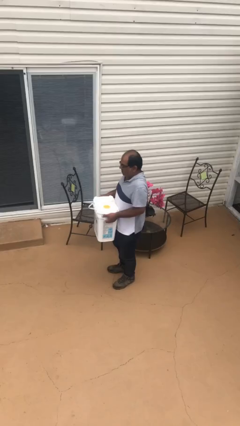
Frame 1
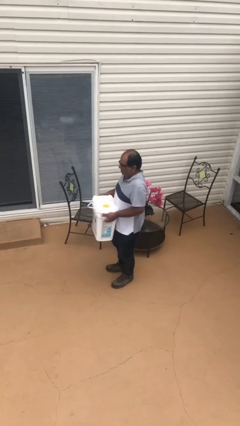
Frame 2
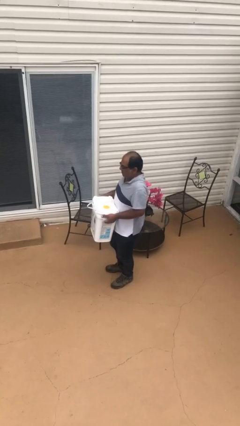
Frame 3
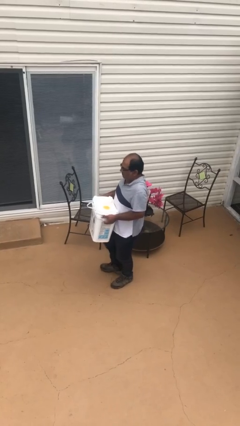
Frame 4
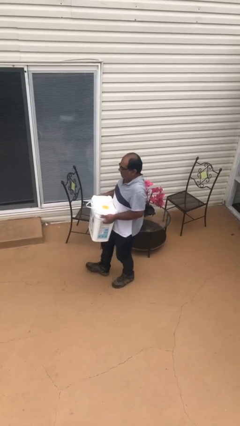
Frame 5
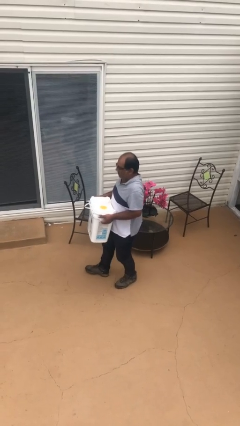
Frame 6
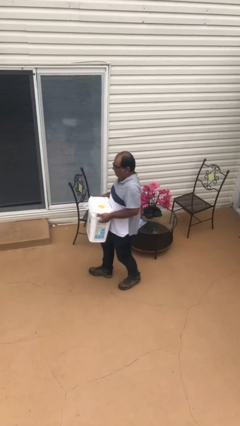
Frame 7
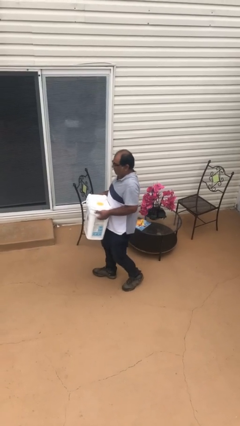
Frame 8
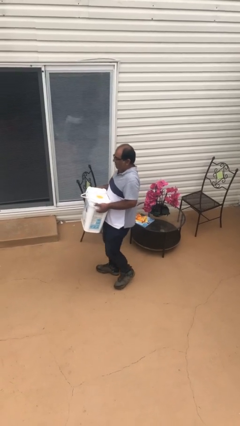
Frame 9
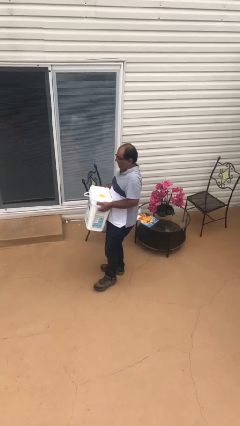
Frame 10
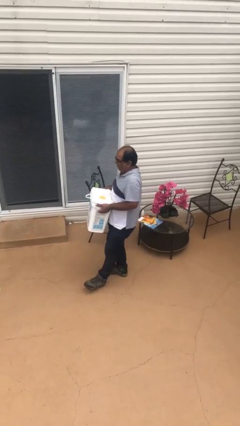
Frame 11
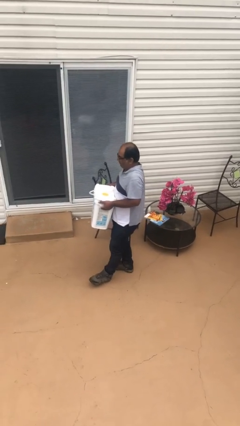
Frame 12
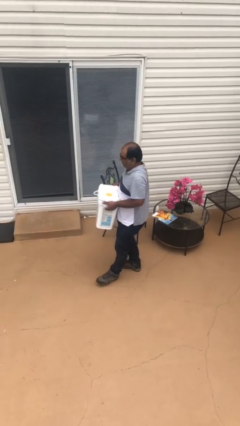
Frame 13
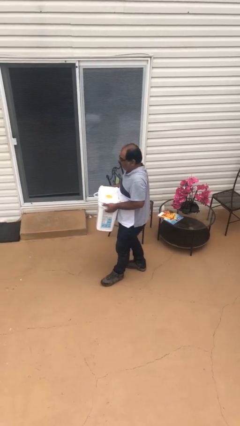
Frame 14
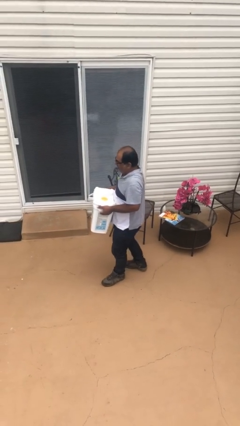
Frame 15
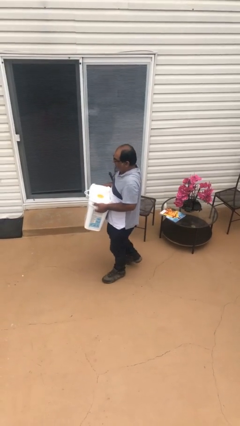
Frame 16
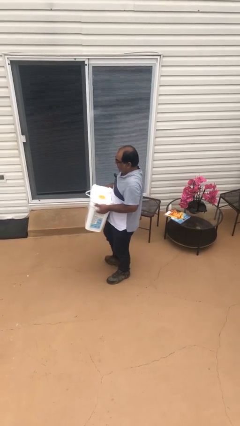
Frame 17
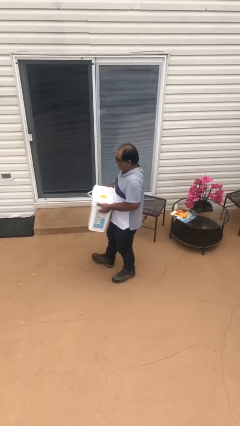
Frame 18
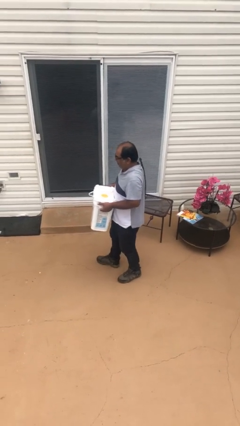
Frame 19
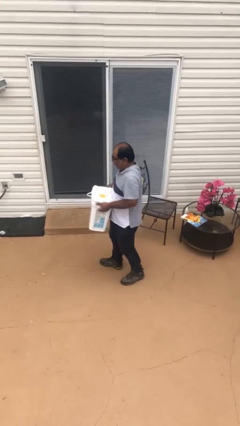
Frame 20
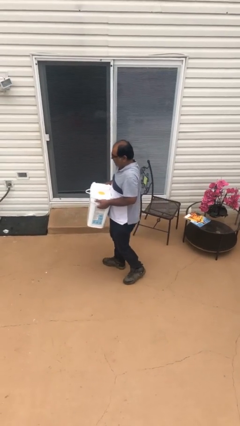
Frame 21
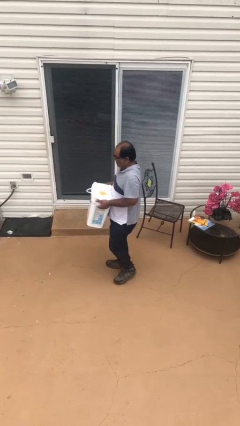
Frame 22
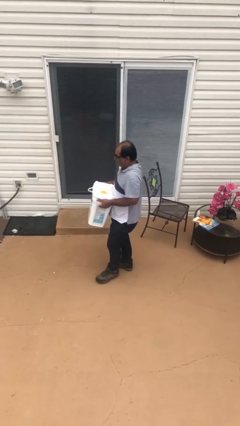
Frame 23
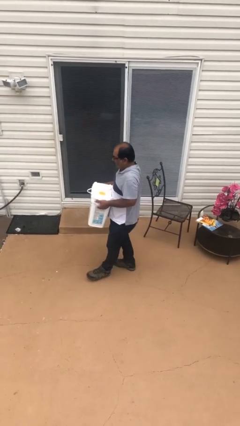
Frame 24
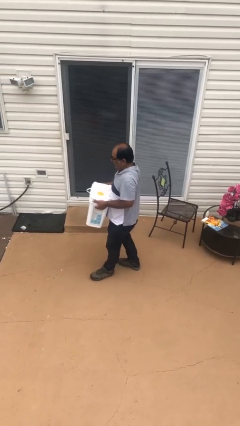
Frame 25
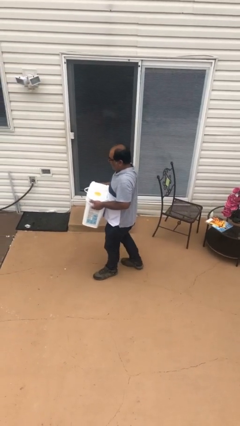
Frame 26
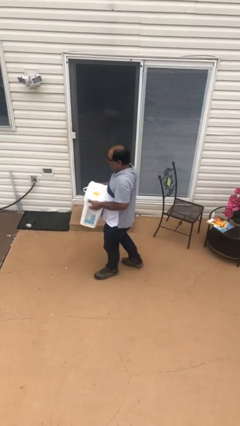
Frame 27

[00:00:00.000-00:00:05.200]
person carries heavy object

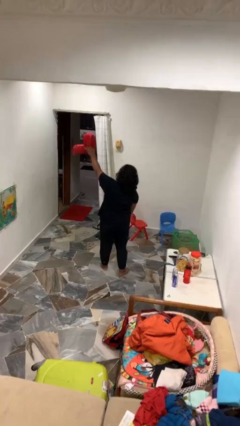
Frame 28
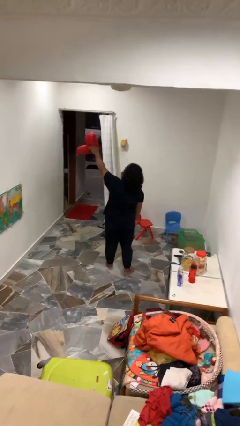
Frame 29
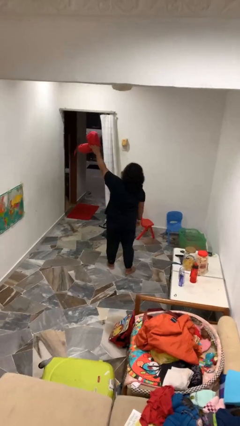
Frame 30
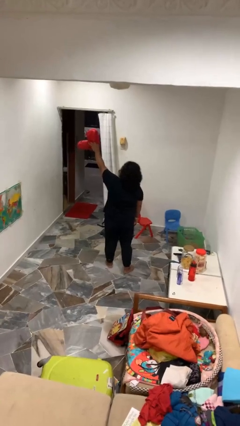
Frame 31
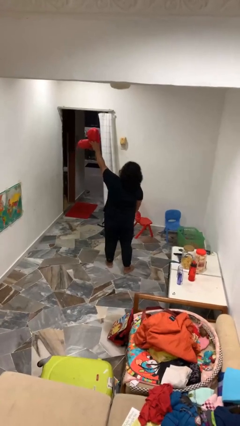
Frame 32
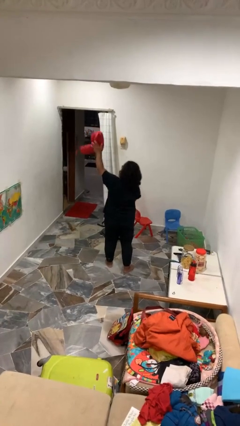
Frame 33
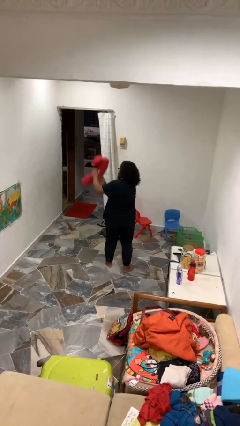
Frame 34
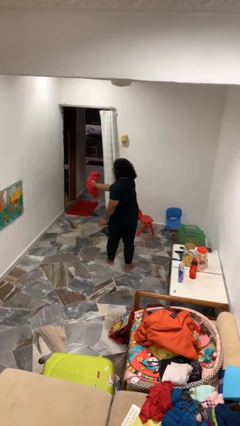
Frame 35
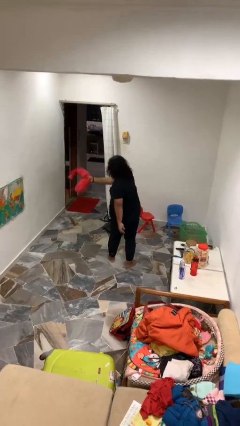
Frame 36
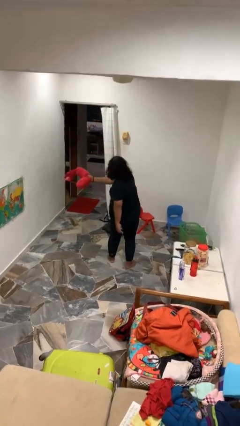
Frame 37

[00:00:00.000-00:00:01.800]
person drops object

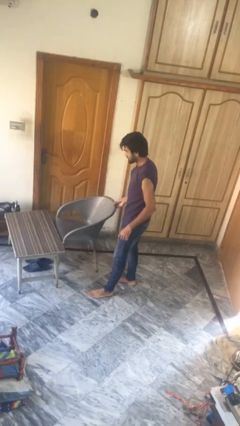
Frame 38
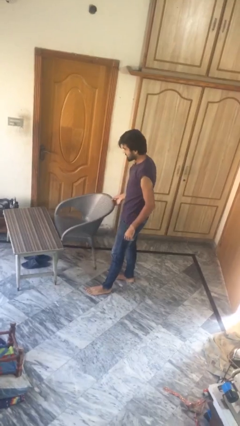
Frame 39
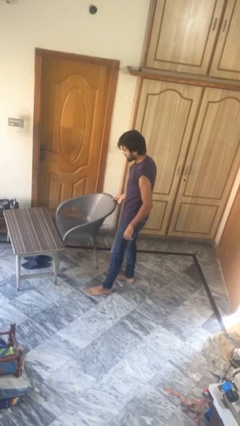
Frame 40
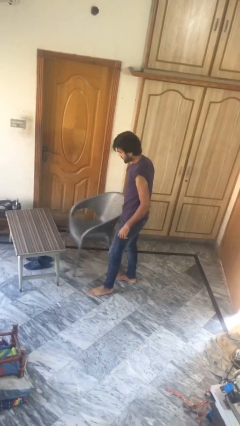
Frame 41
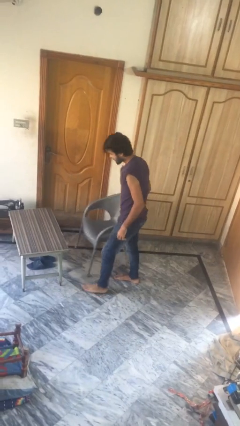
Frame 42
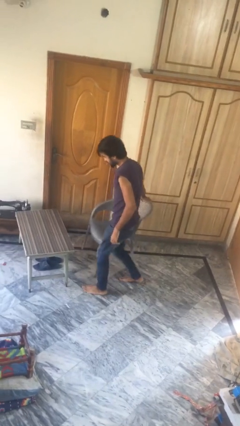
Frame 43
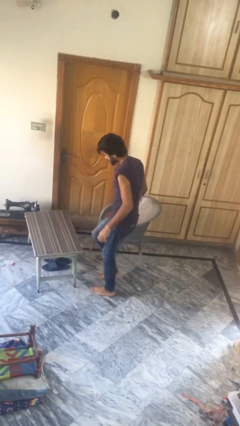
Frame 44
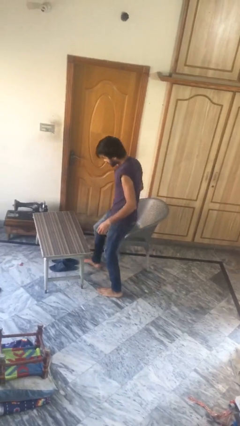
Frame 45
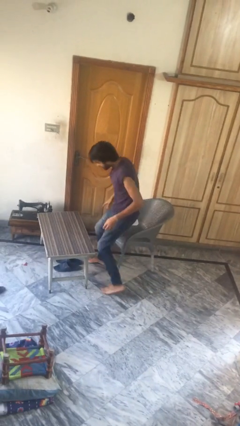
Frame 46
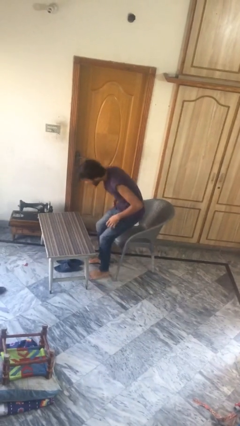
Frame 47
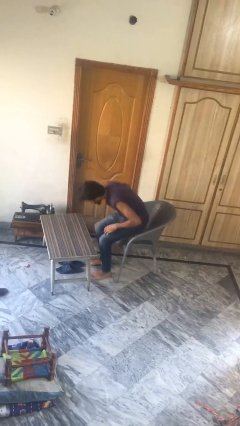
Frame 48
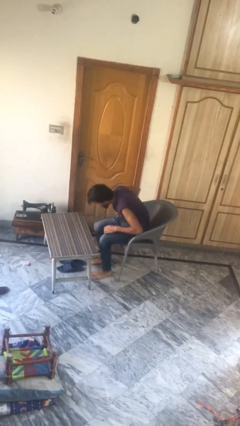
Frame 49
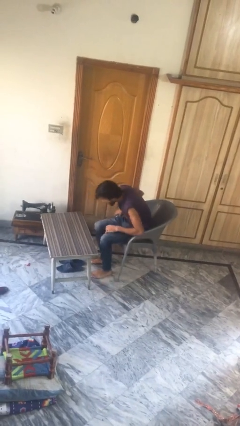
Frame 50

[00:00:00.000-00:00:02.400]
person sits down

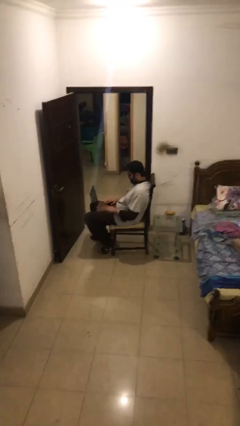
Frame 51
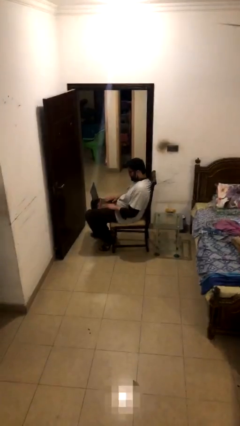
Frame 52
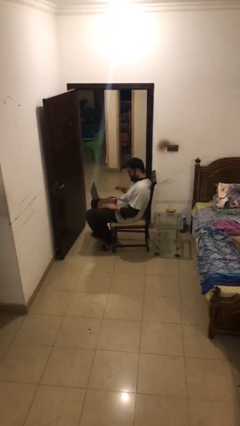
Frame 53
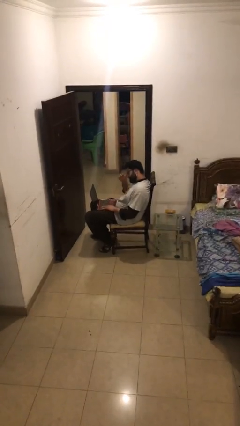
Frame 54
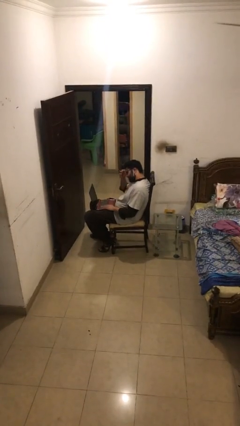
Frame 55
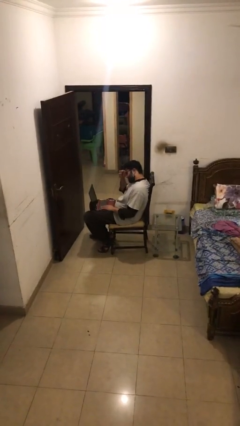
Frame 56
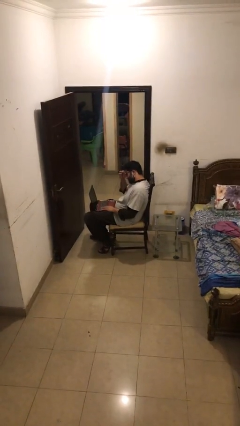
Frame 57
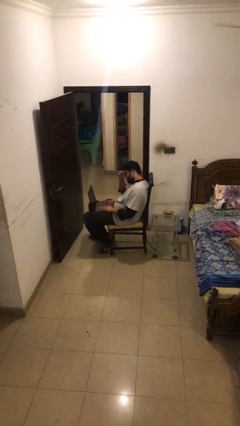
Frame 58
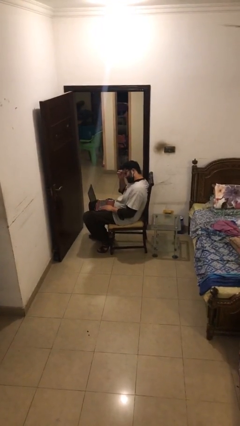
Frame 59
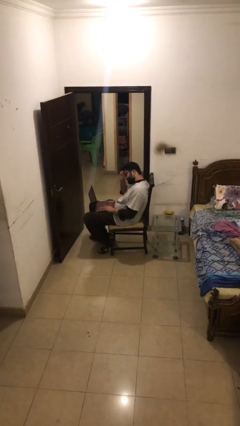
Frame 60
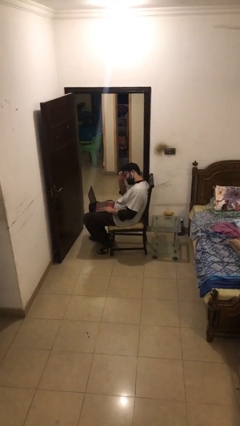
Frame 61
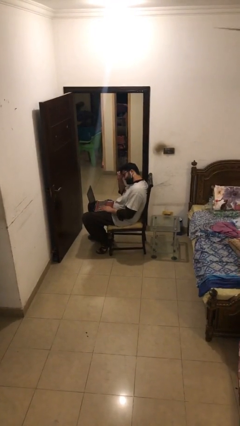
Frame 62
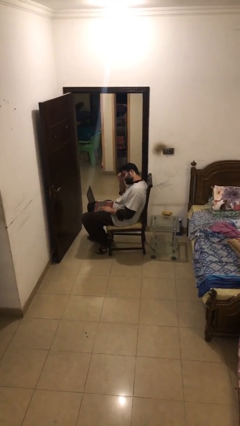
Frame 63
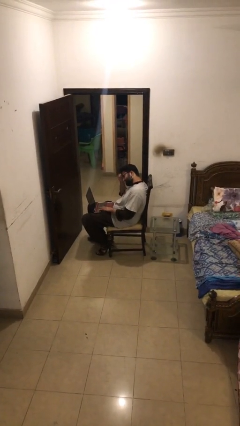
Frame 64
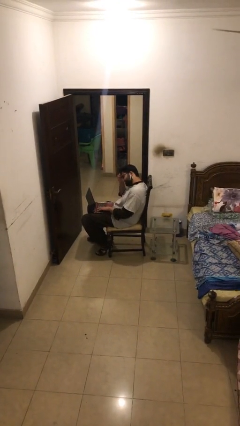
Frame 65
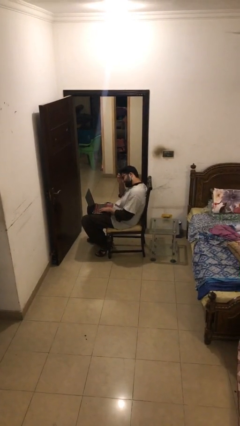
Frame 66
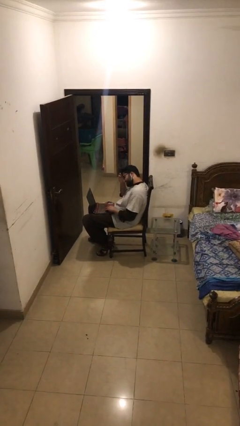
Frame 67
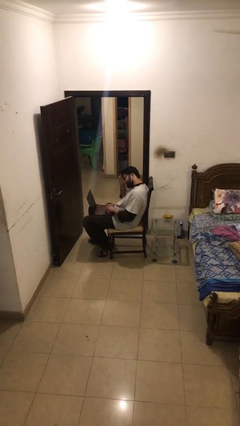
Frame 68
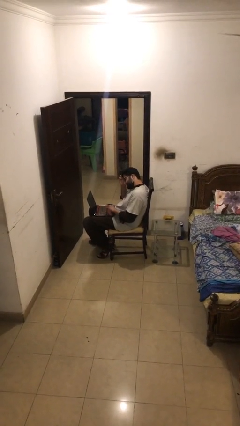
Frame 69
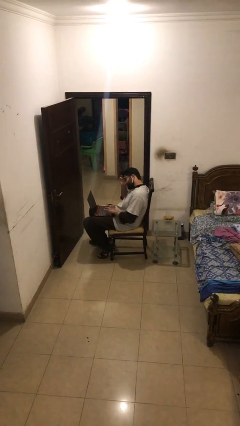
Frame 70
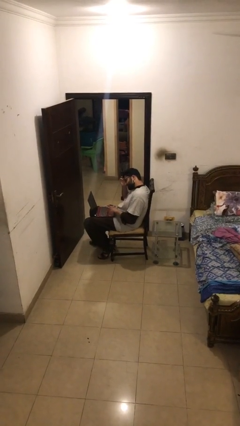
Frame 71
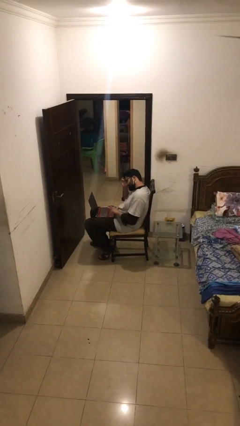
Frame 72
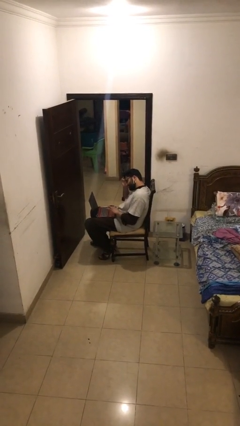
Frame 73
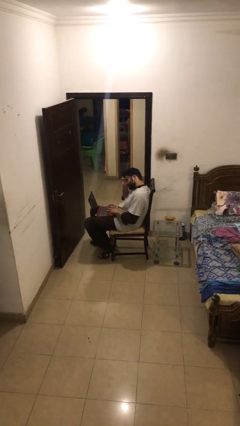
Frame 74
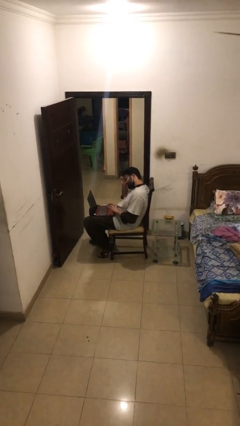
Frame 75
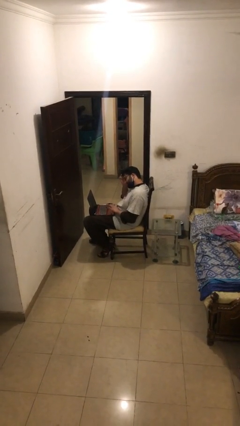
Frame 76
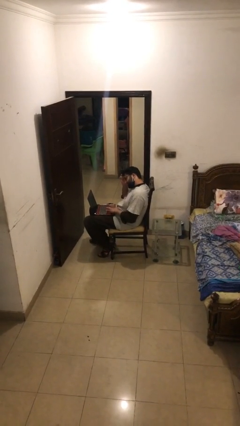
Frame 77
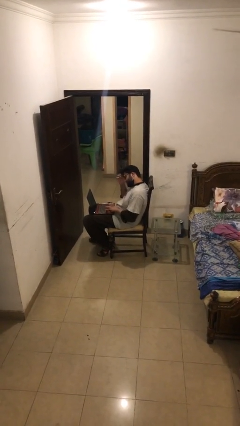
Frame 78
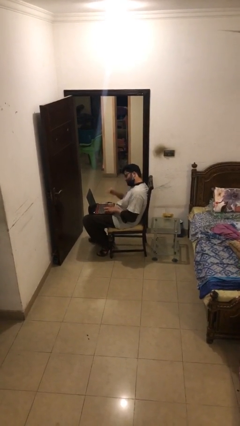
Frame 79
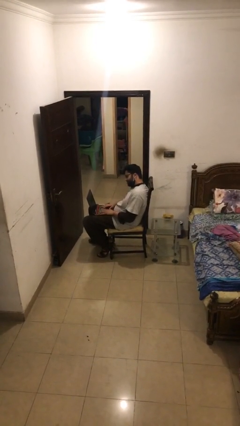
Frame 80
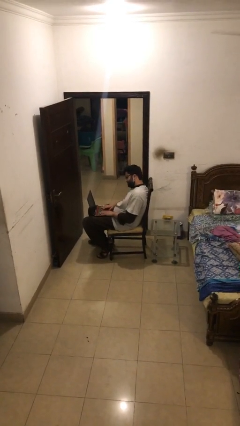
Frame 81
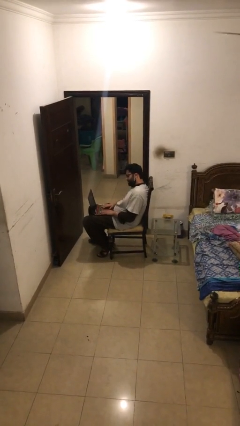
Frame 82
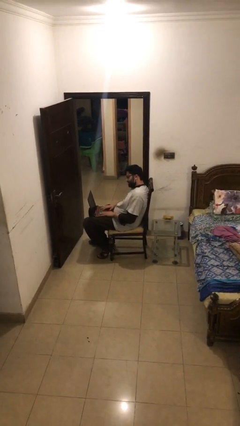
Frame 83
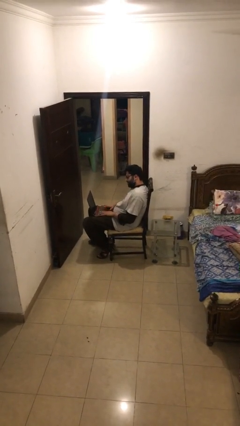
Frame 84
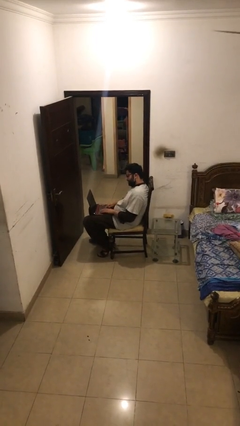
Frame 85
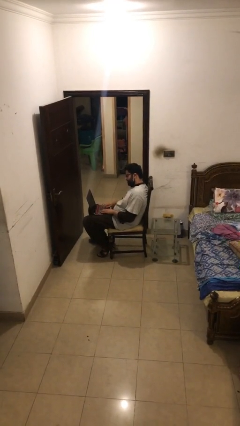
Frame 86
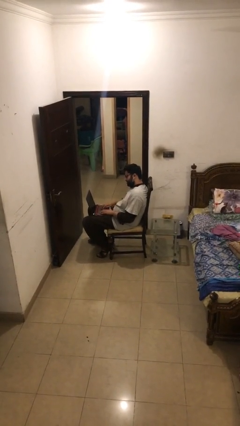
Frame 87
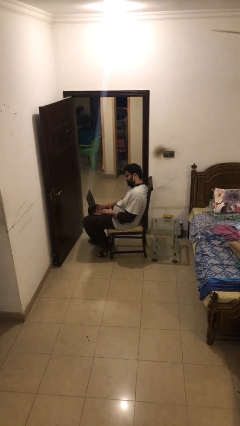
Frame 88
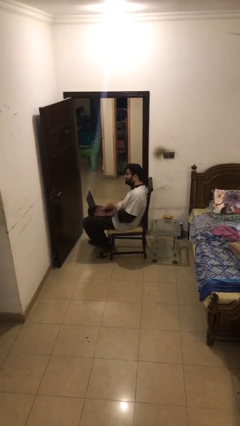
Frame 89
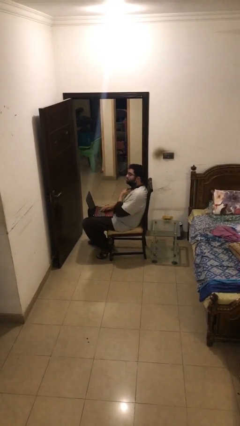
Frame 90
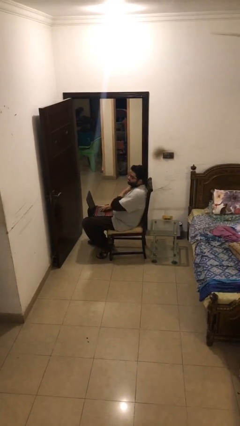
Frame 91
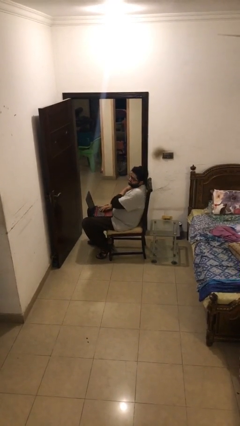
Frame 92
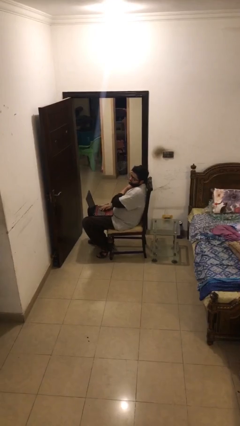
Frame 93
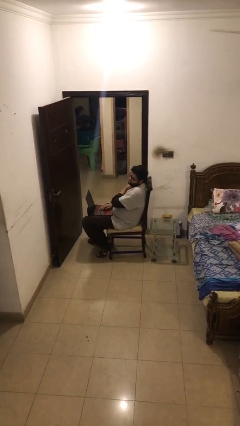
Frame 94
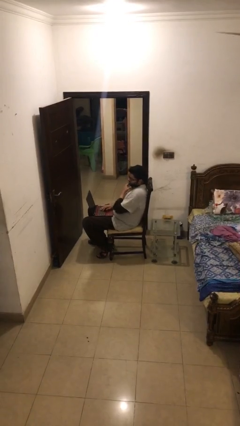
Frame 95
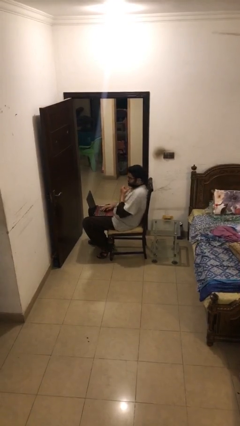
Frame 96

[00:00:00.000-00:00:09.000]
person interacts with laptop
